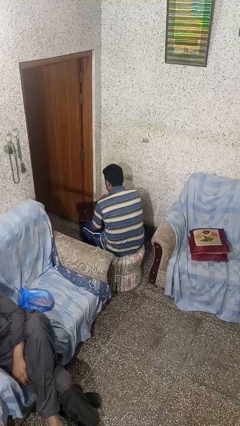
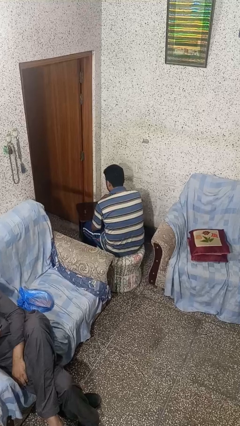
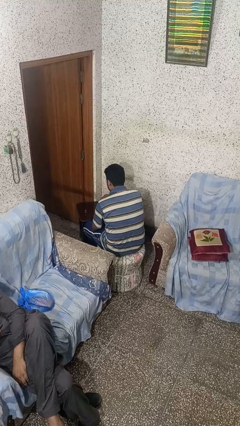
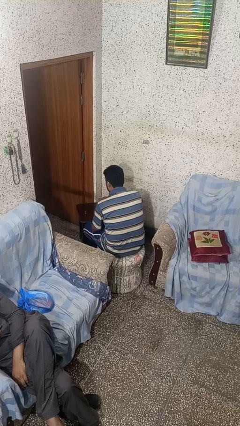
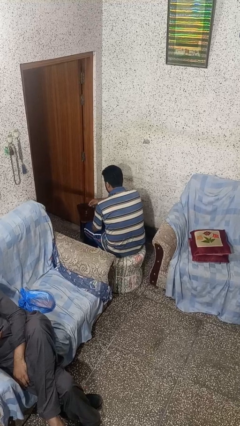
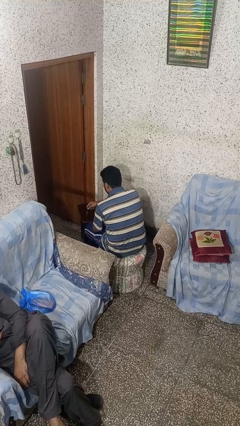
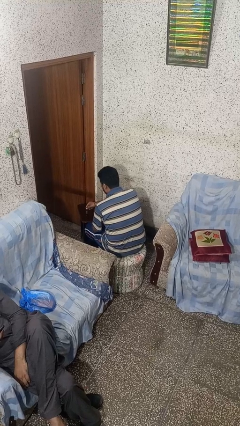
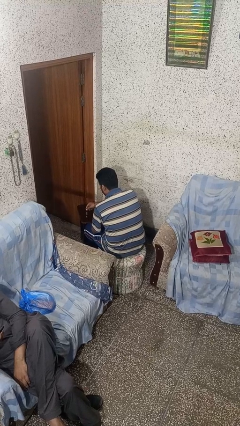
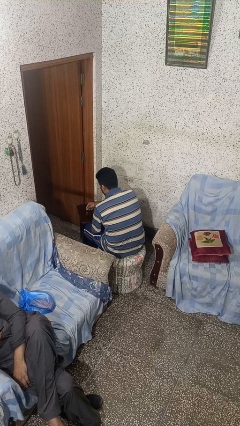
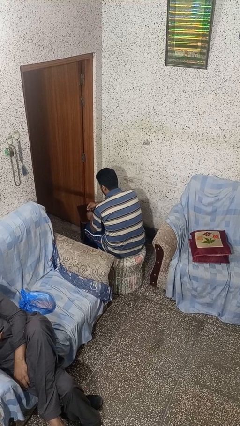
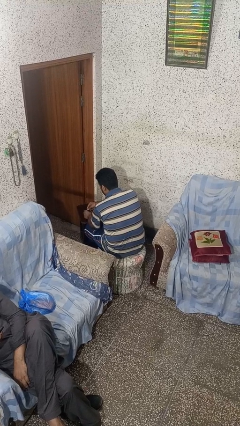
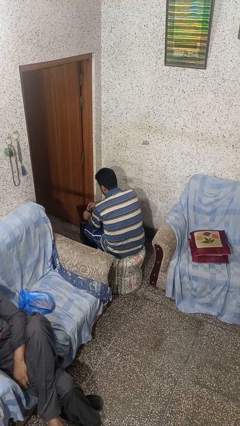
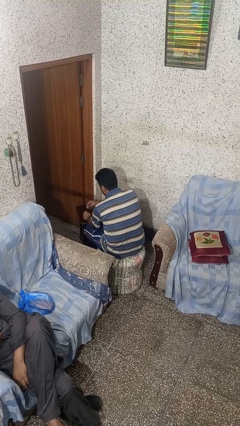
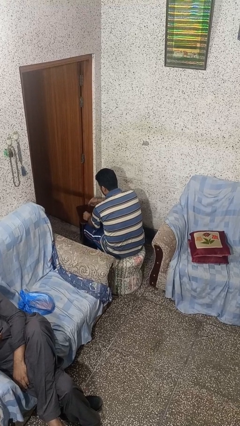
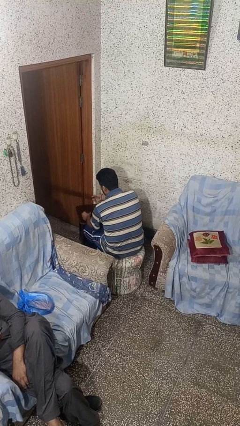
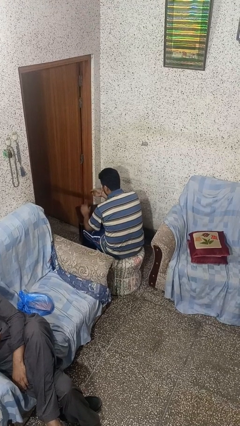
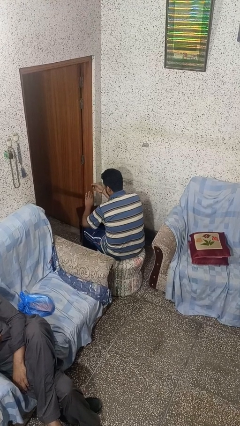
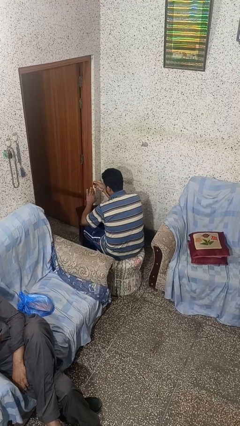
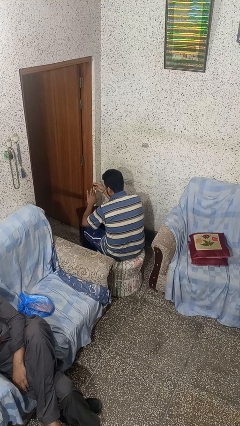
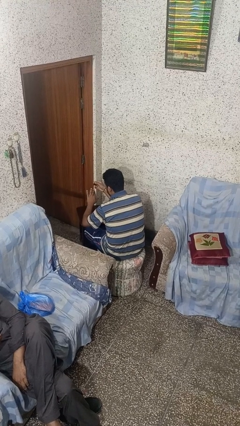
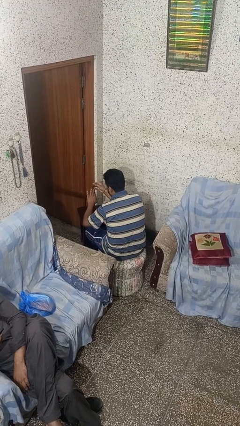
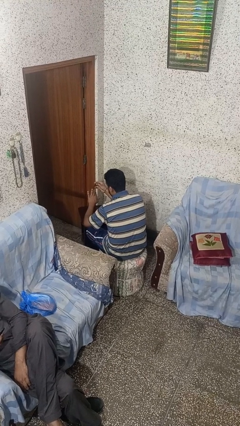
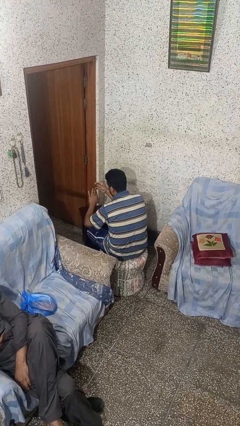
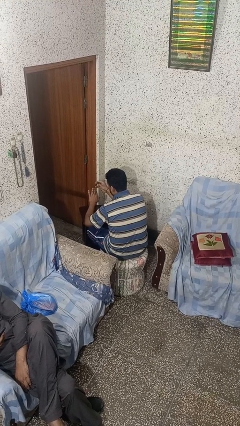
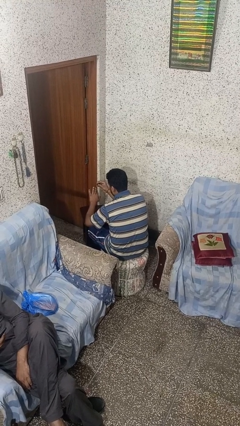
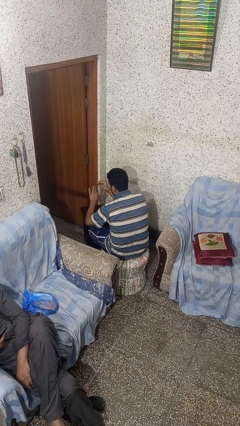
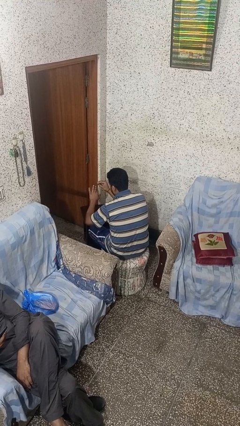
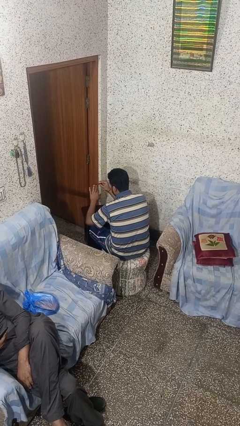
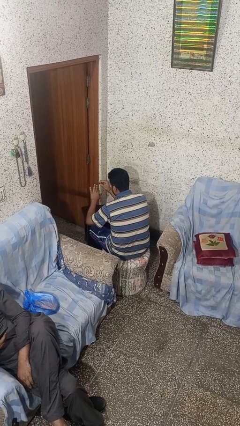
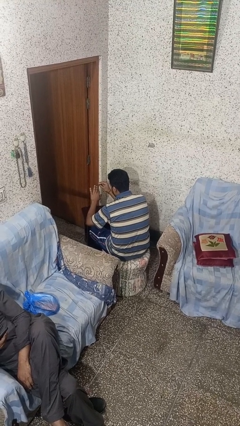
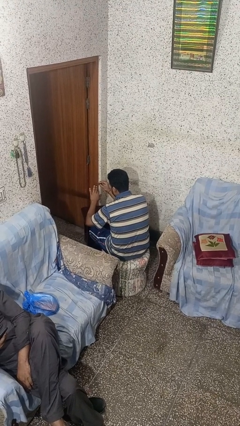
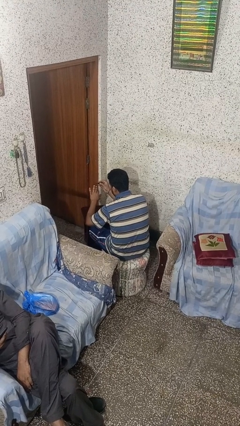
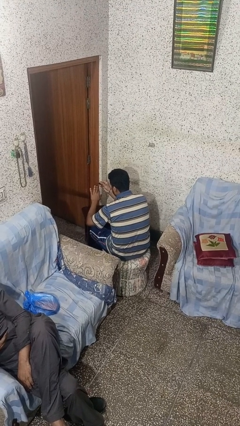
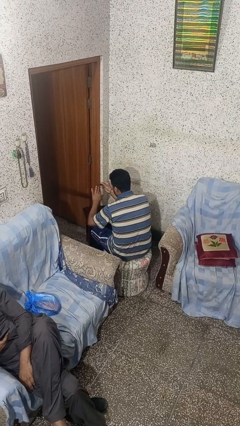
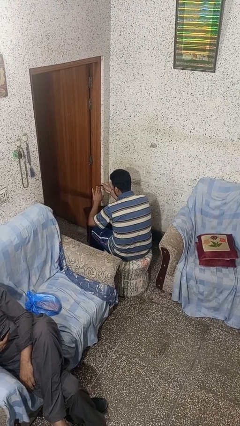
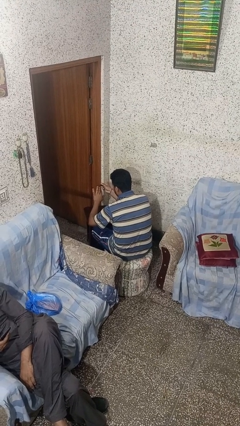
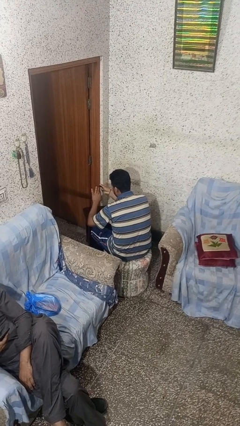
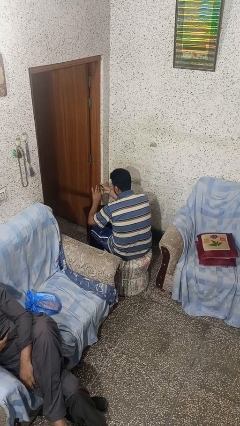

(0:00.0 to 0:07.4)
person paints fingernails

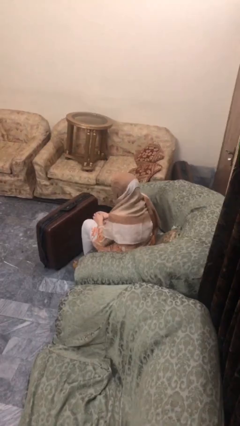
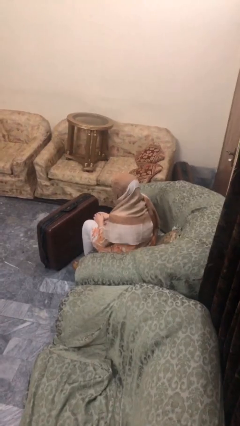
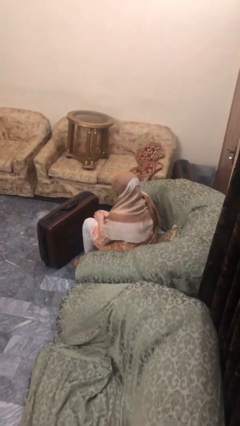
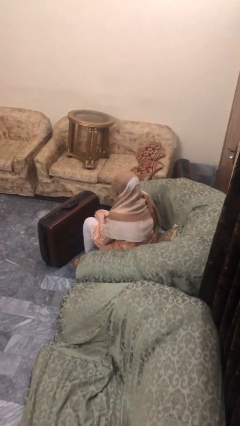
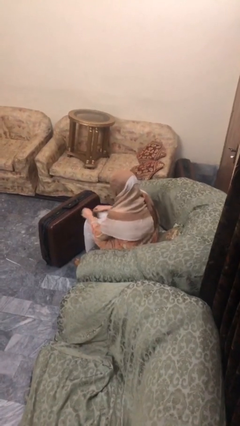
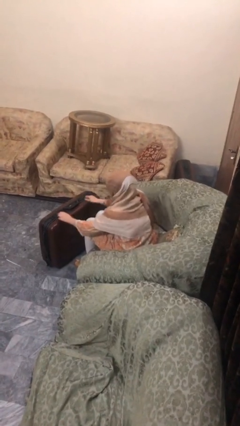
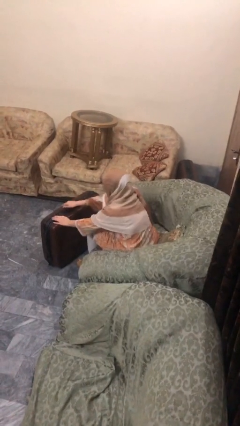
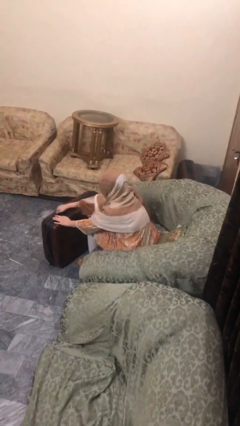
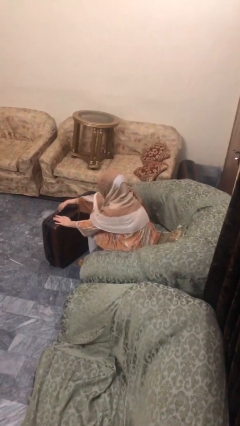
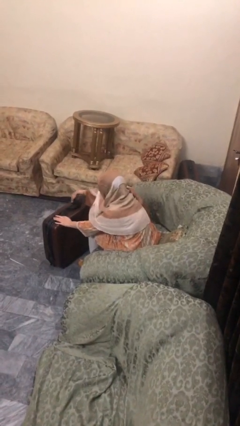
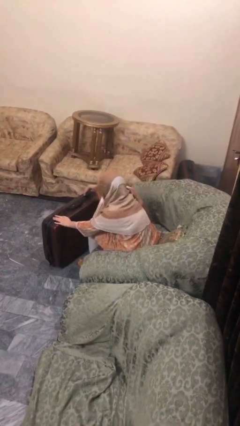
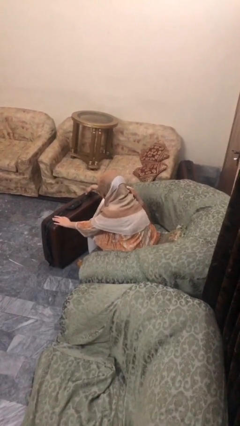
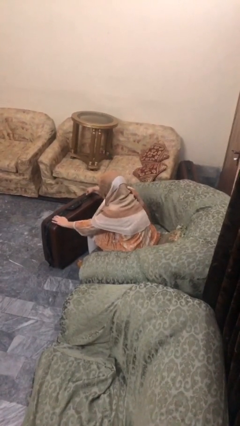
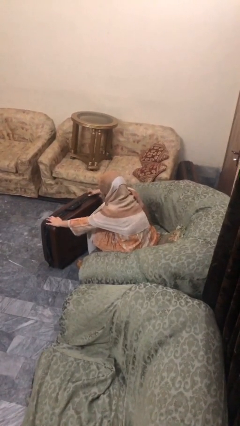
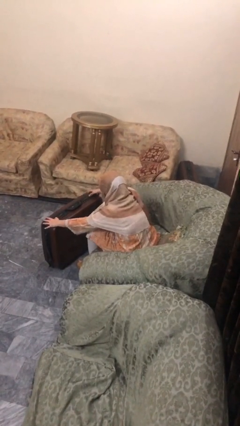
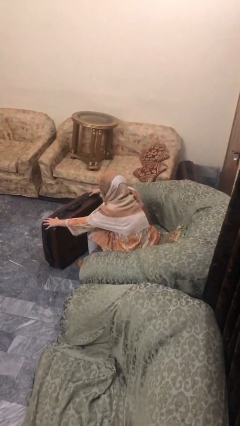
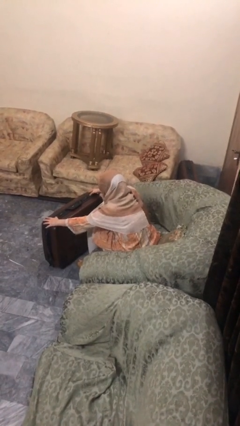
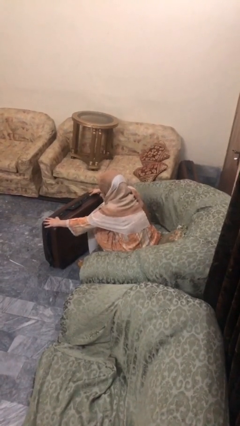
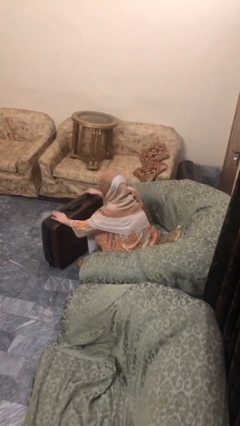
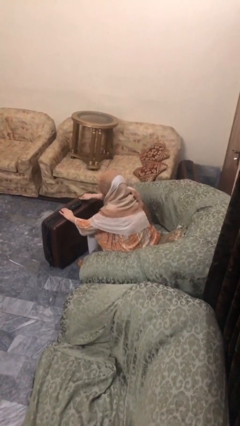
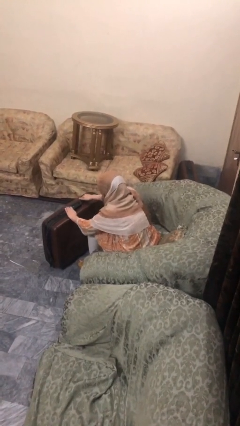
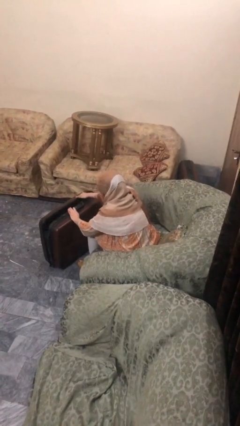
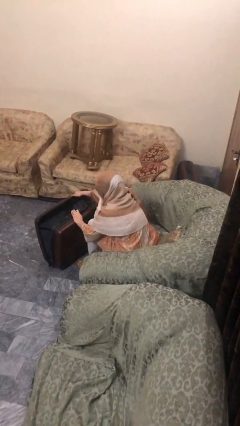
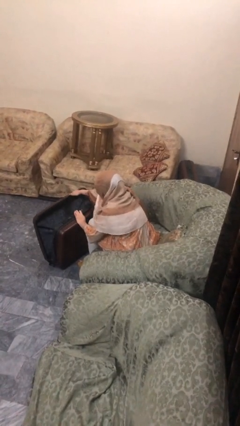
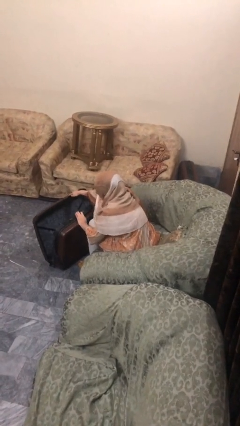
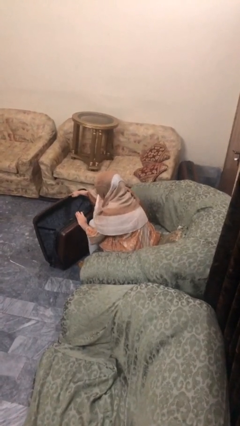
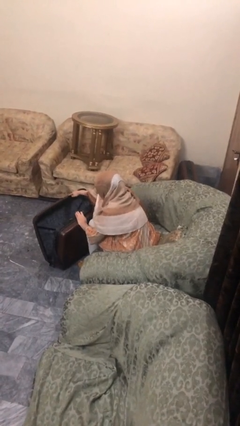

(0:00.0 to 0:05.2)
person opens suitcase

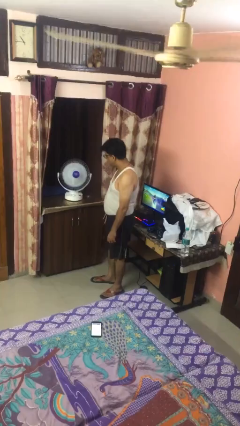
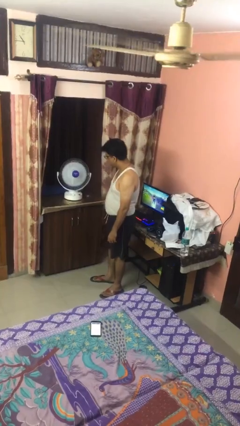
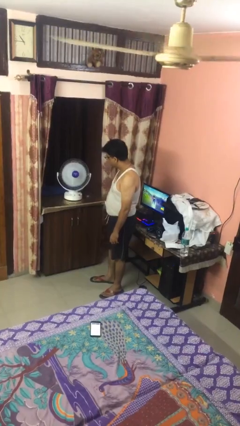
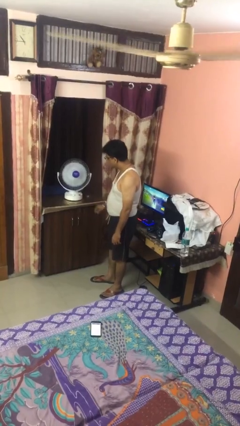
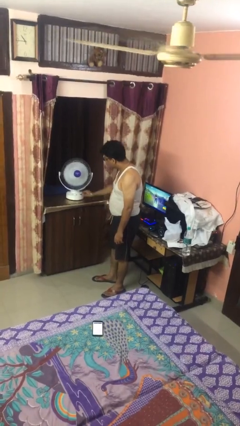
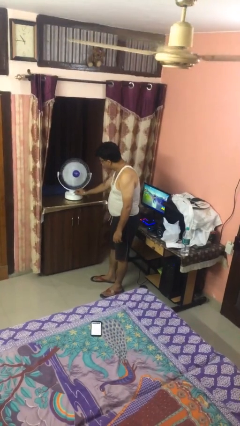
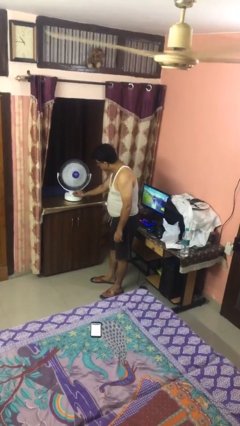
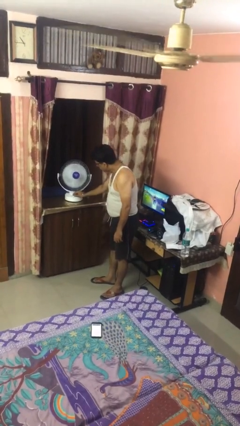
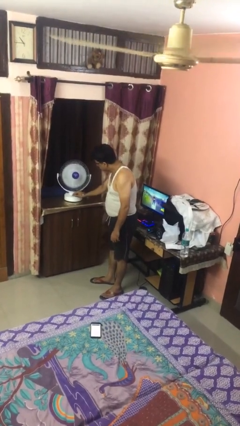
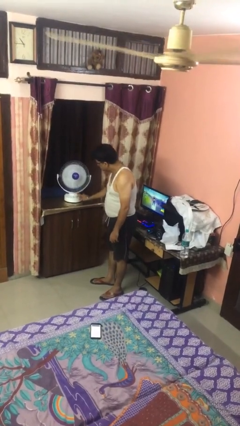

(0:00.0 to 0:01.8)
person turns off fan

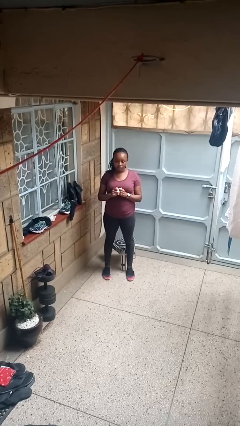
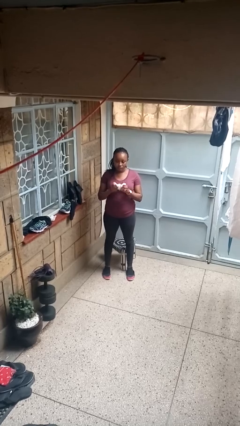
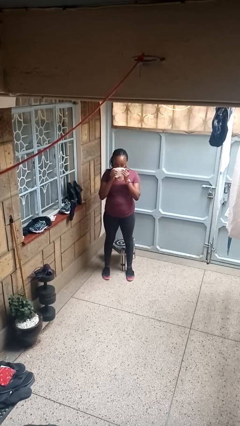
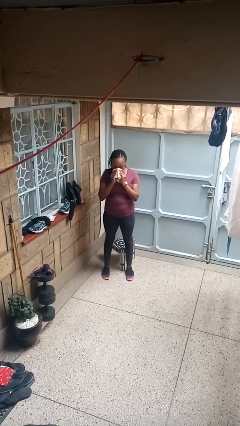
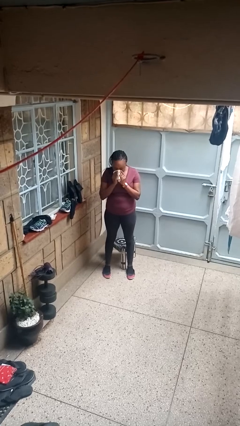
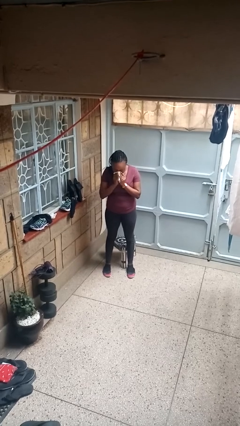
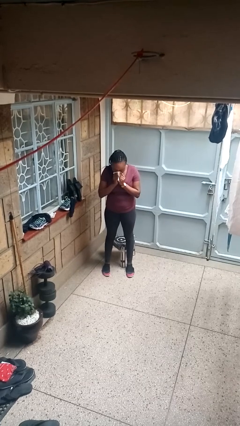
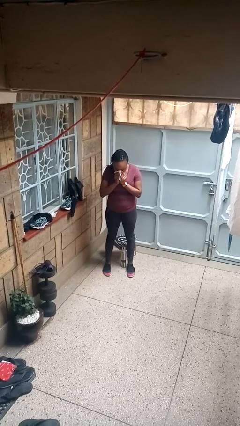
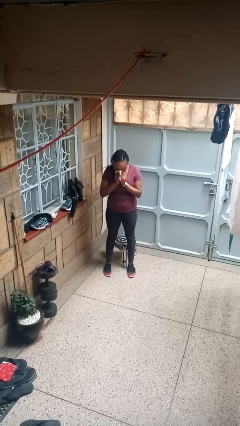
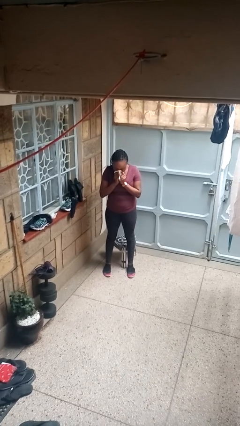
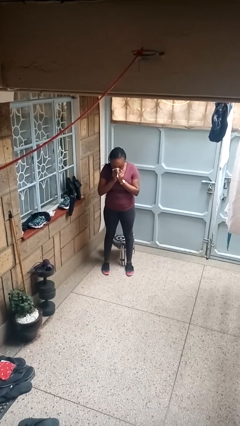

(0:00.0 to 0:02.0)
person blows nose

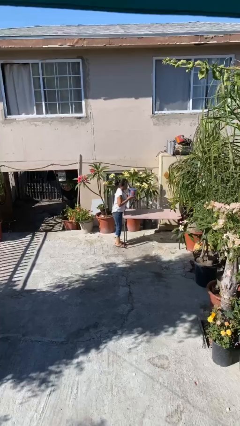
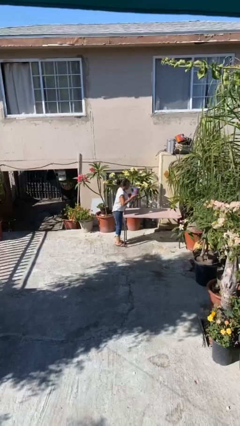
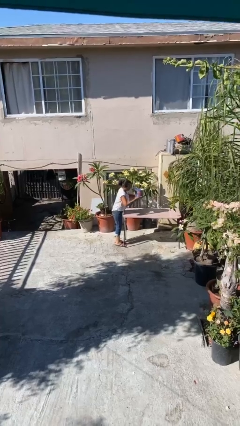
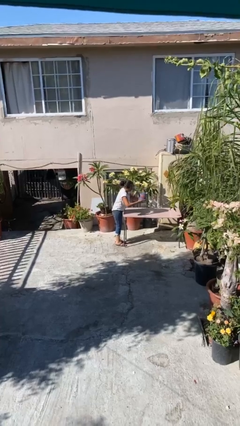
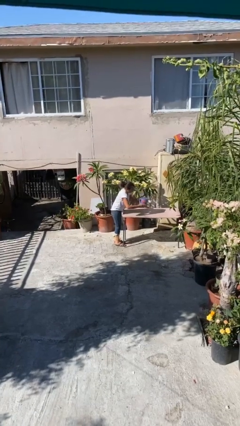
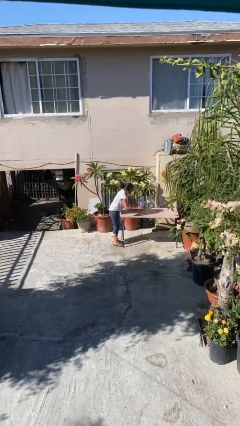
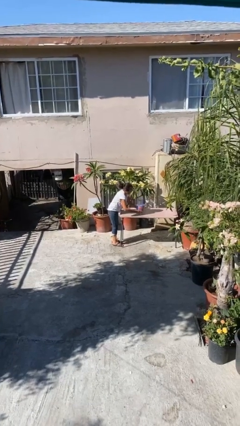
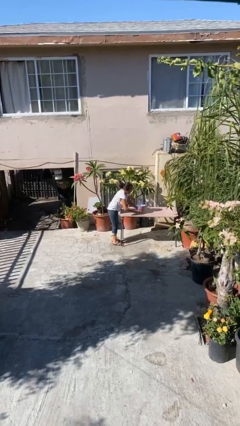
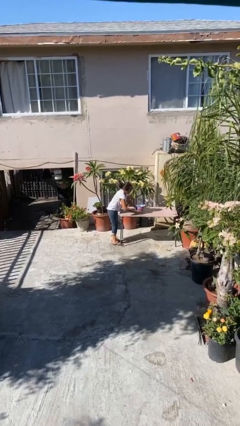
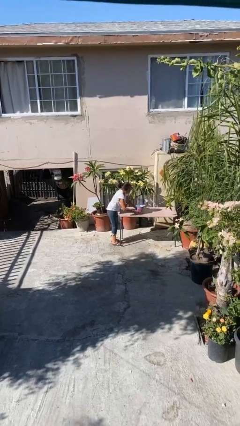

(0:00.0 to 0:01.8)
person puts down object on table
